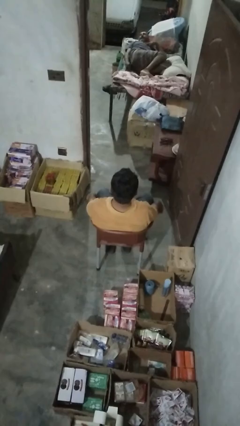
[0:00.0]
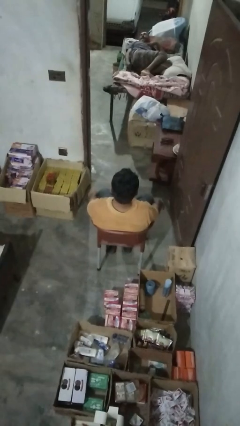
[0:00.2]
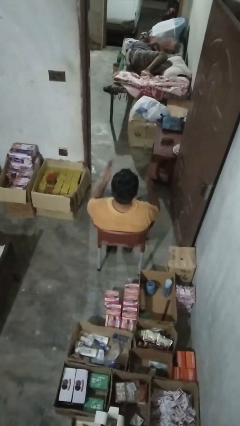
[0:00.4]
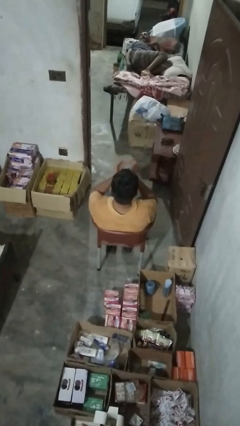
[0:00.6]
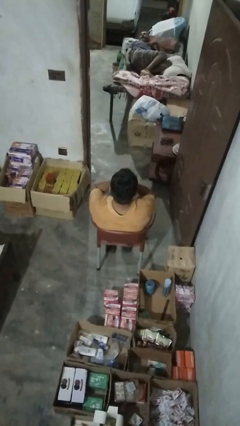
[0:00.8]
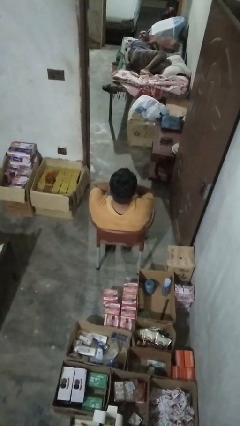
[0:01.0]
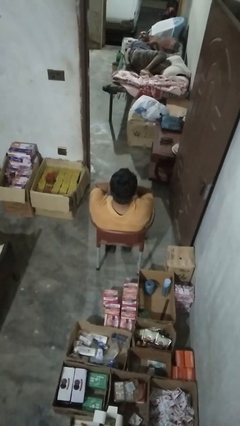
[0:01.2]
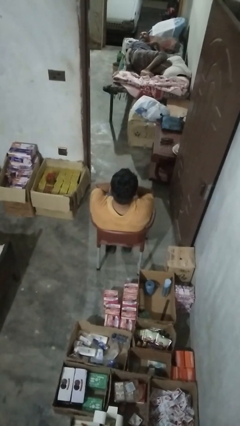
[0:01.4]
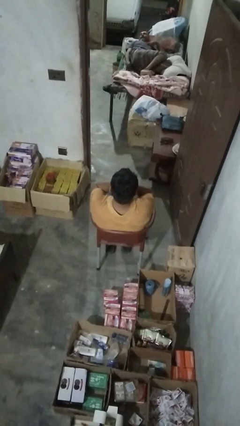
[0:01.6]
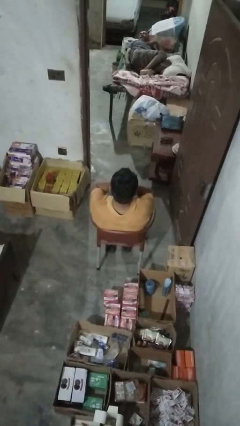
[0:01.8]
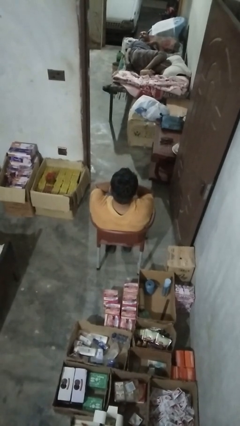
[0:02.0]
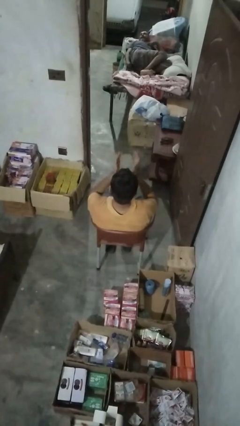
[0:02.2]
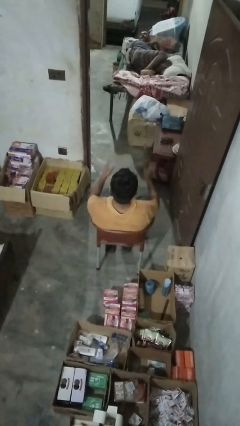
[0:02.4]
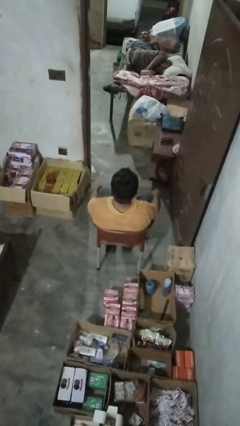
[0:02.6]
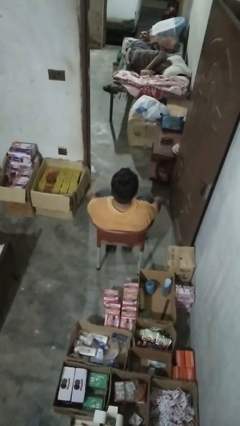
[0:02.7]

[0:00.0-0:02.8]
person covers face with hands

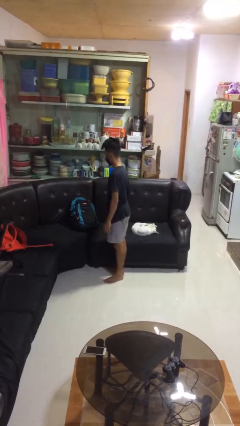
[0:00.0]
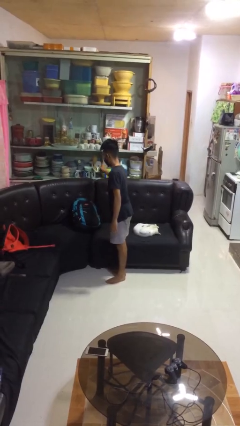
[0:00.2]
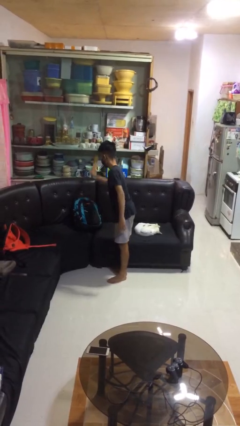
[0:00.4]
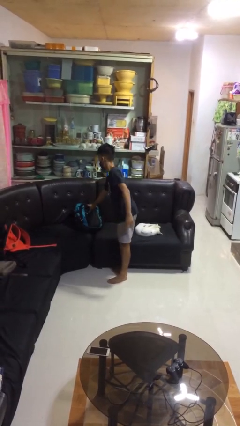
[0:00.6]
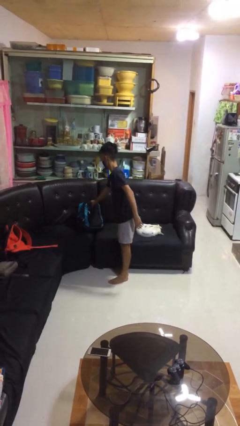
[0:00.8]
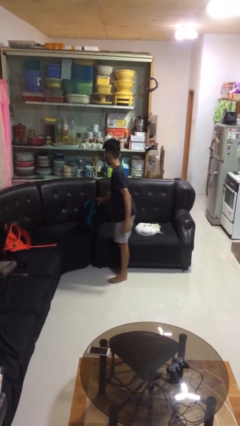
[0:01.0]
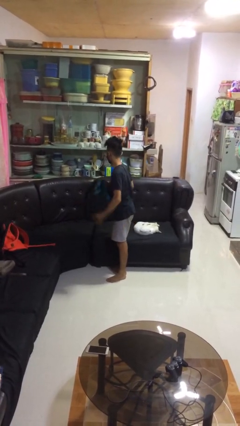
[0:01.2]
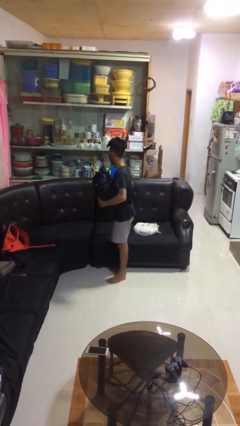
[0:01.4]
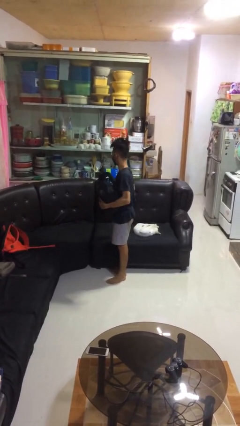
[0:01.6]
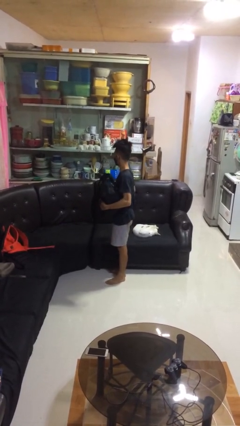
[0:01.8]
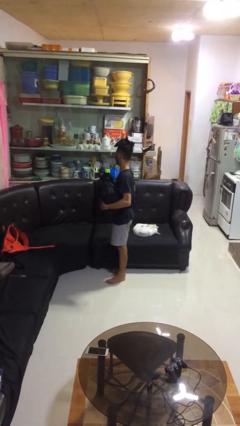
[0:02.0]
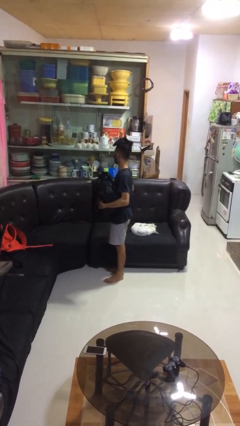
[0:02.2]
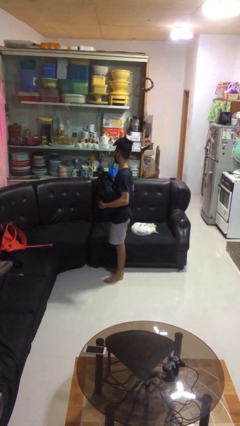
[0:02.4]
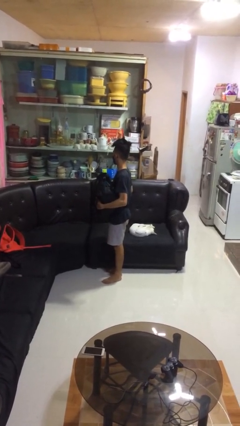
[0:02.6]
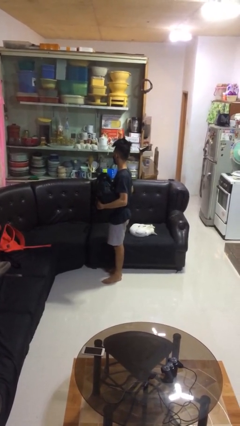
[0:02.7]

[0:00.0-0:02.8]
person picks up object from couch

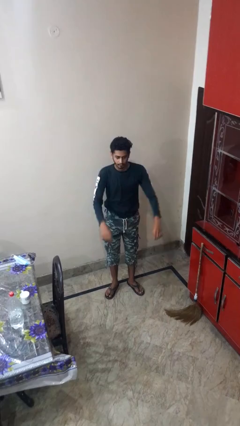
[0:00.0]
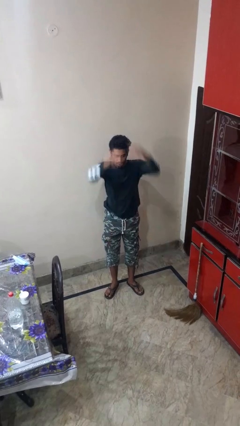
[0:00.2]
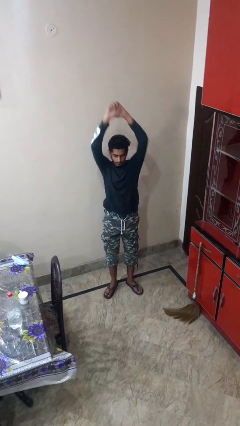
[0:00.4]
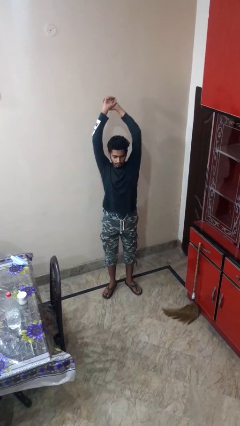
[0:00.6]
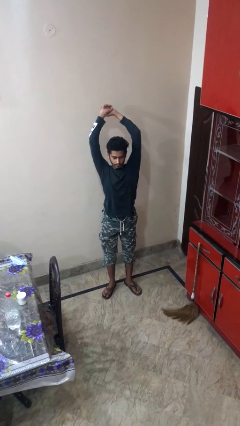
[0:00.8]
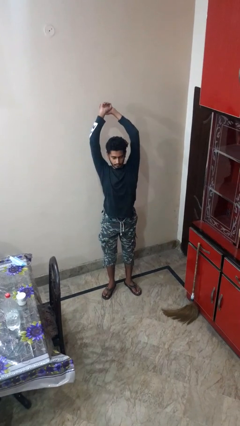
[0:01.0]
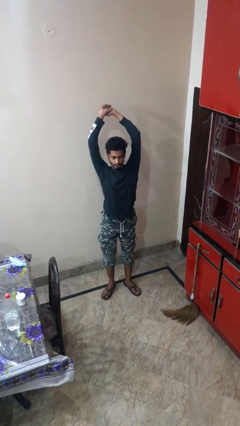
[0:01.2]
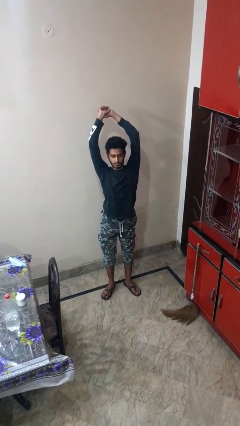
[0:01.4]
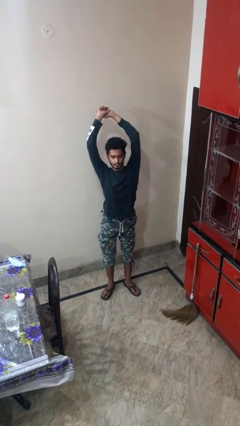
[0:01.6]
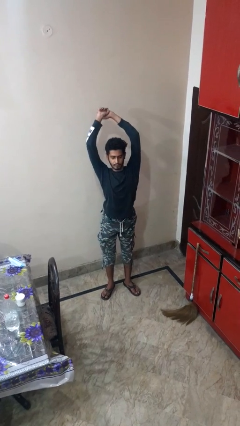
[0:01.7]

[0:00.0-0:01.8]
person stretches arms over head

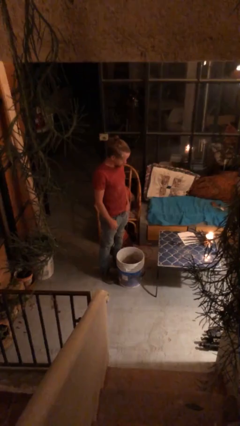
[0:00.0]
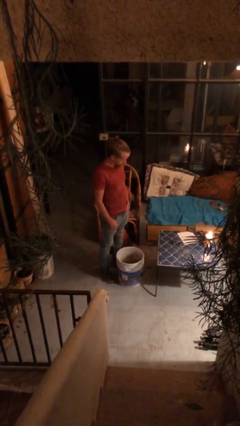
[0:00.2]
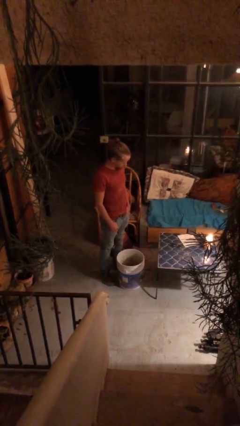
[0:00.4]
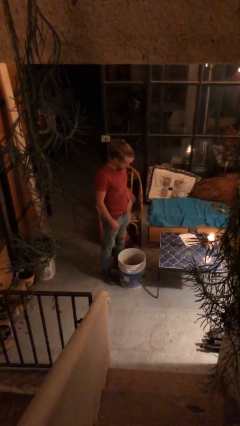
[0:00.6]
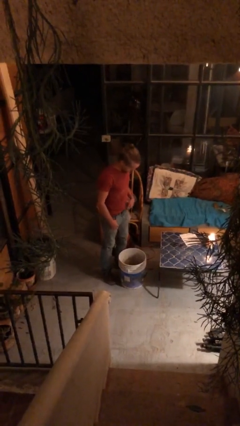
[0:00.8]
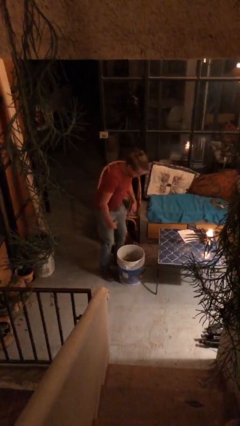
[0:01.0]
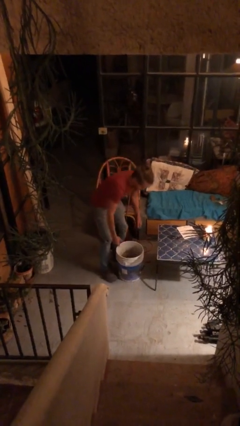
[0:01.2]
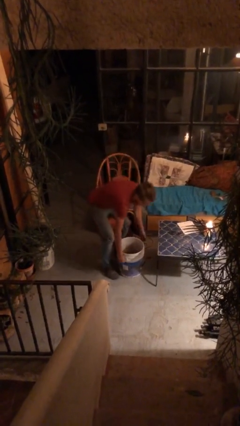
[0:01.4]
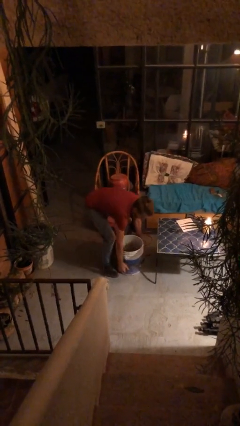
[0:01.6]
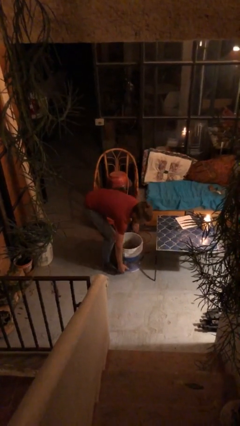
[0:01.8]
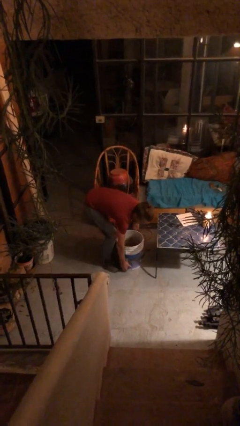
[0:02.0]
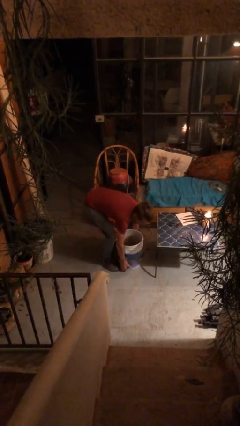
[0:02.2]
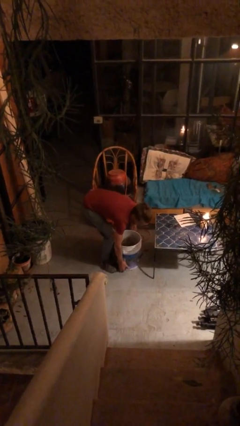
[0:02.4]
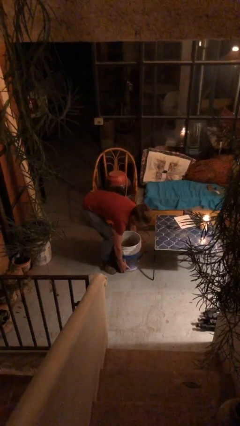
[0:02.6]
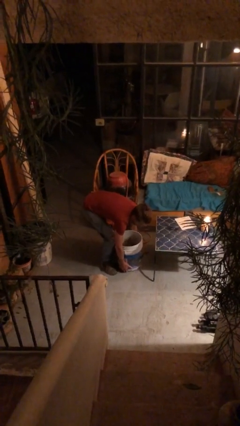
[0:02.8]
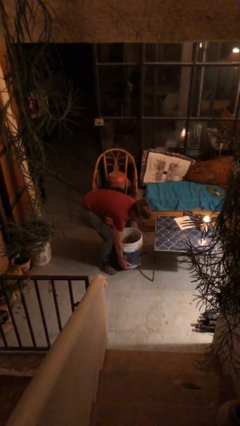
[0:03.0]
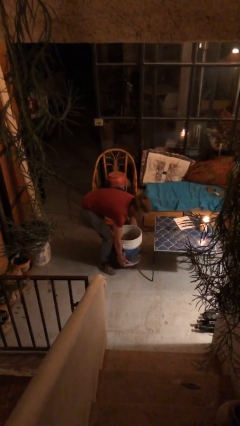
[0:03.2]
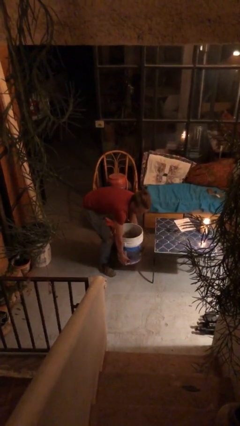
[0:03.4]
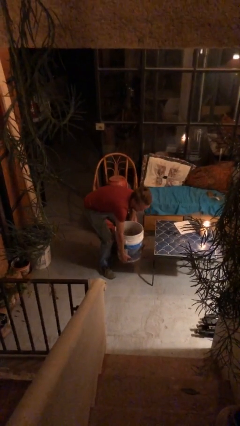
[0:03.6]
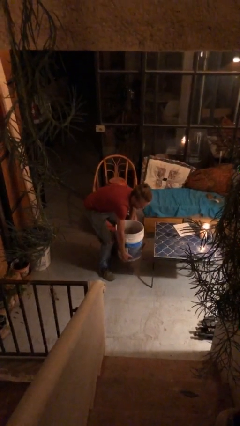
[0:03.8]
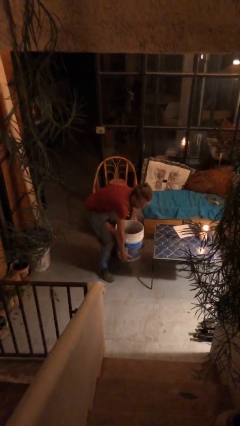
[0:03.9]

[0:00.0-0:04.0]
person picks up object from floor

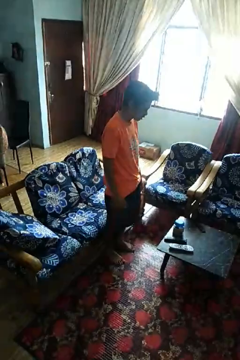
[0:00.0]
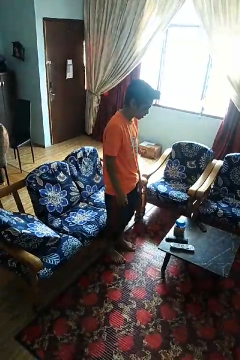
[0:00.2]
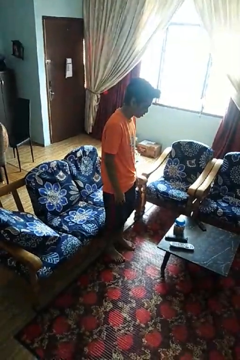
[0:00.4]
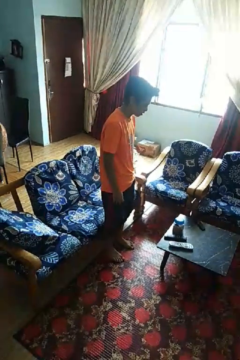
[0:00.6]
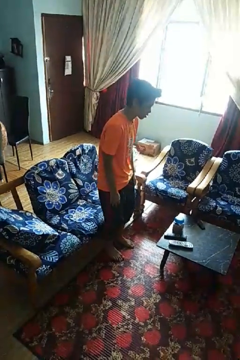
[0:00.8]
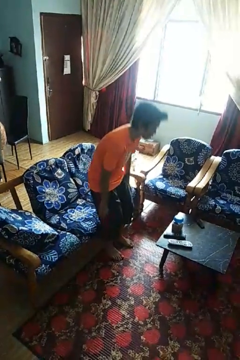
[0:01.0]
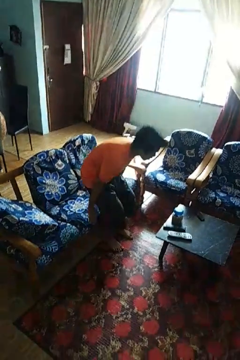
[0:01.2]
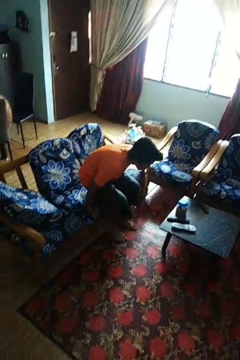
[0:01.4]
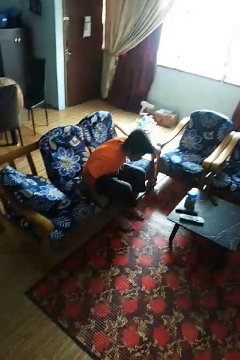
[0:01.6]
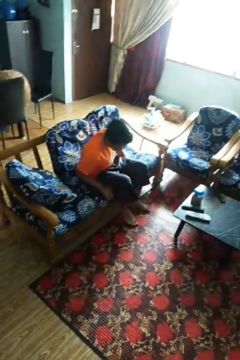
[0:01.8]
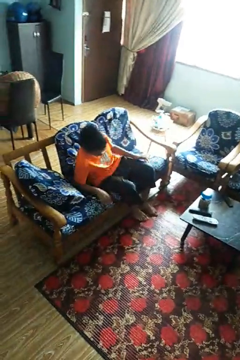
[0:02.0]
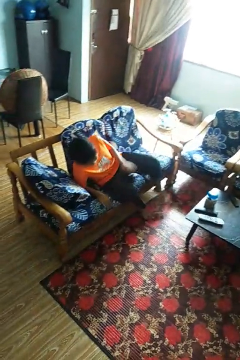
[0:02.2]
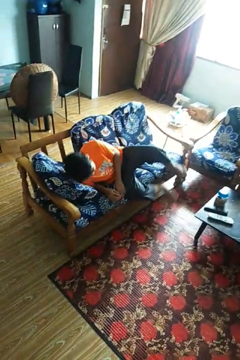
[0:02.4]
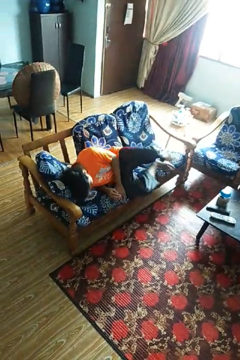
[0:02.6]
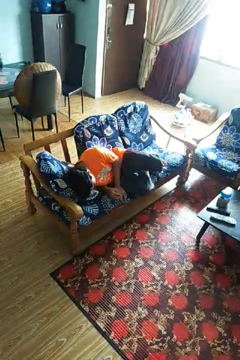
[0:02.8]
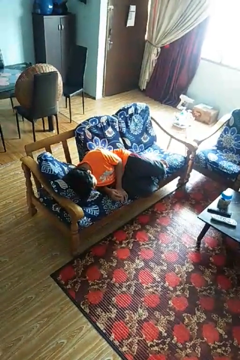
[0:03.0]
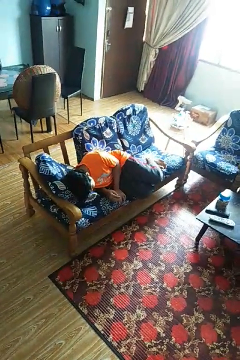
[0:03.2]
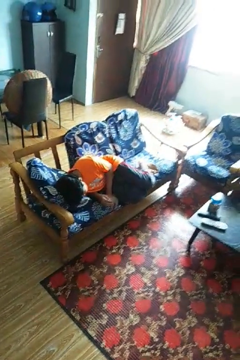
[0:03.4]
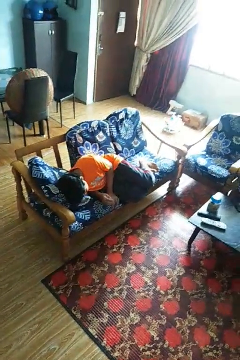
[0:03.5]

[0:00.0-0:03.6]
person lies down on couch

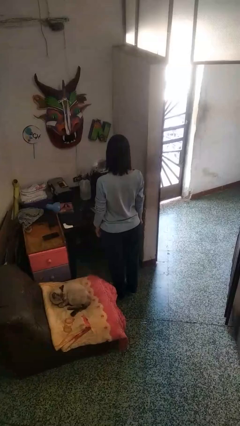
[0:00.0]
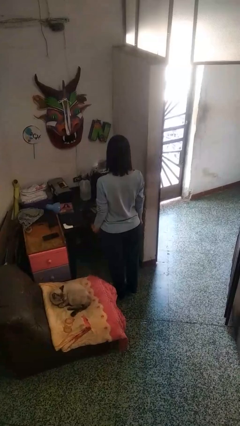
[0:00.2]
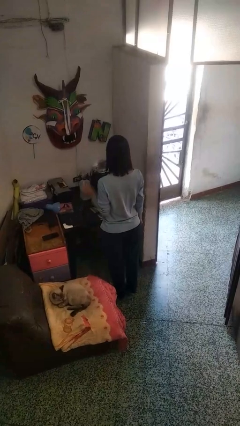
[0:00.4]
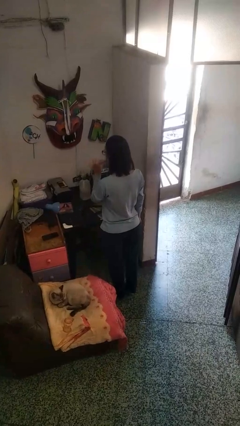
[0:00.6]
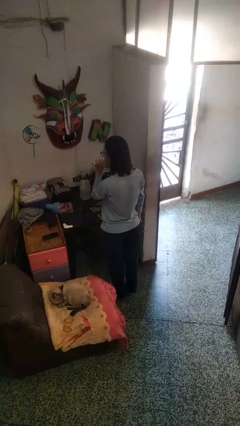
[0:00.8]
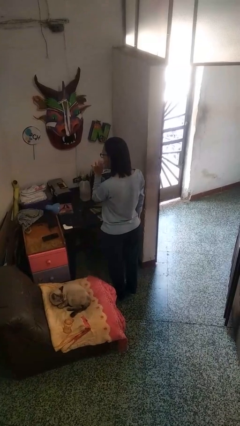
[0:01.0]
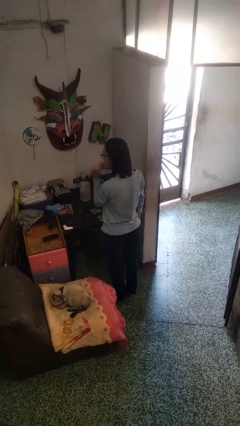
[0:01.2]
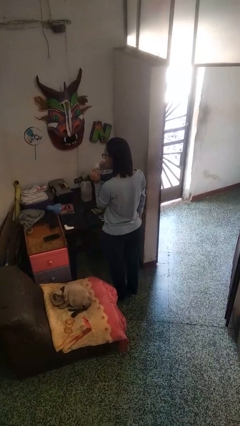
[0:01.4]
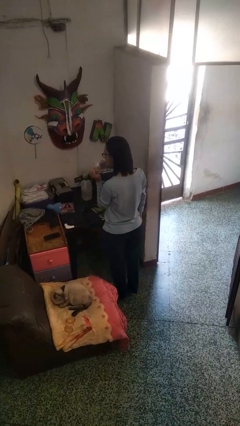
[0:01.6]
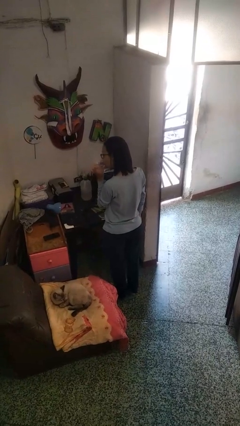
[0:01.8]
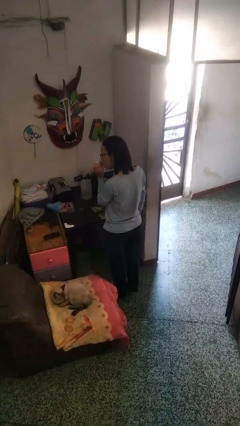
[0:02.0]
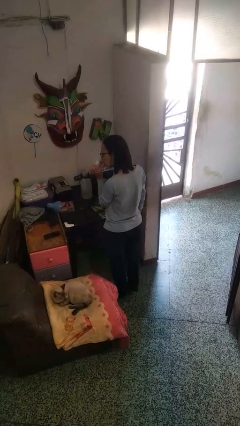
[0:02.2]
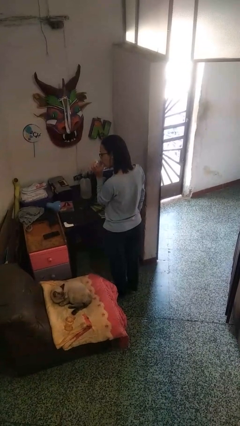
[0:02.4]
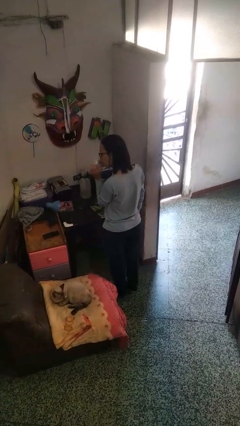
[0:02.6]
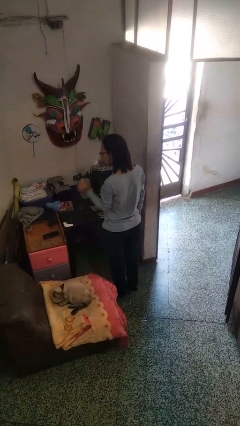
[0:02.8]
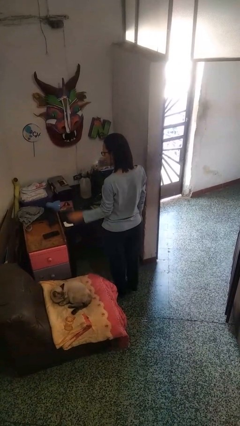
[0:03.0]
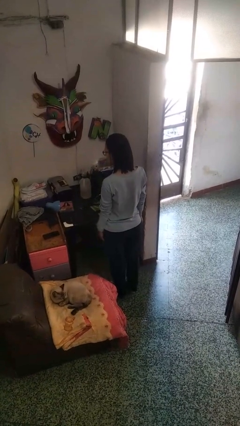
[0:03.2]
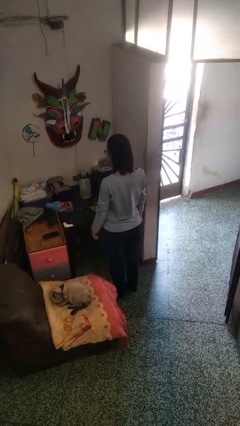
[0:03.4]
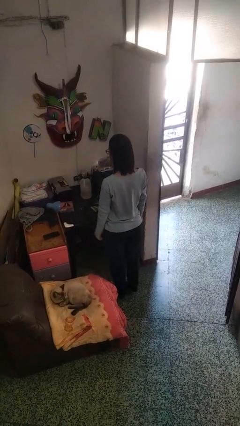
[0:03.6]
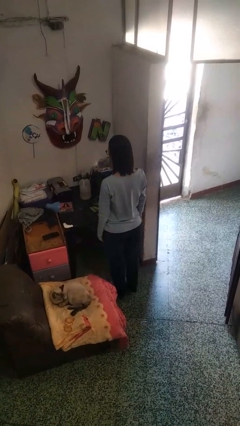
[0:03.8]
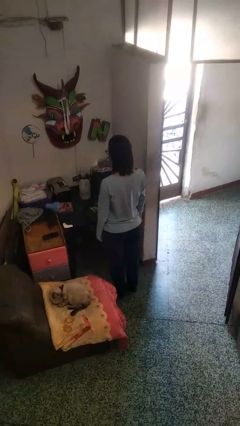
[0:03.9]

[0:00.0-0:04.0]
person licks fingers
